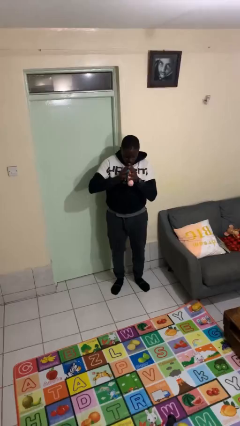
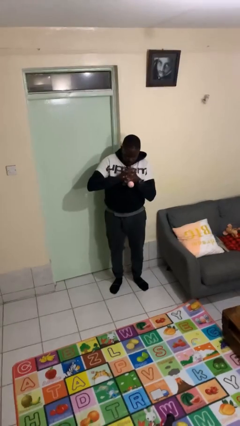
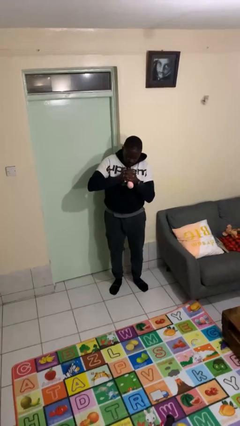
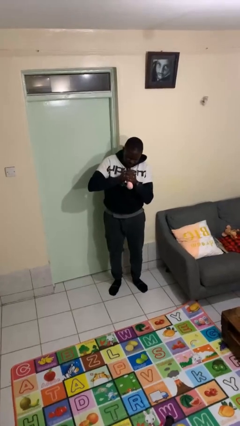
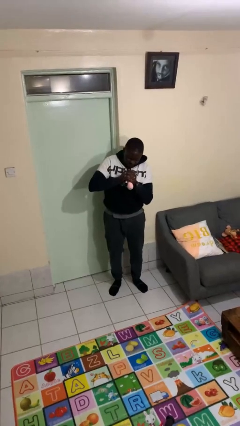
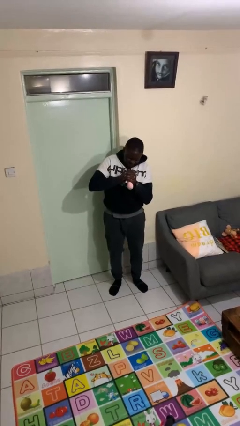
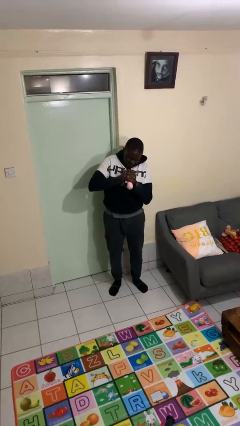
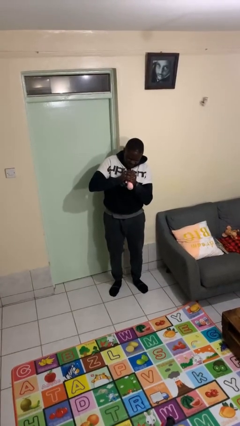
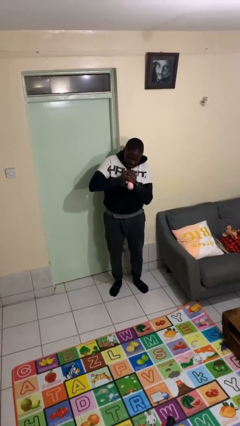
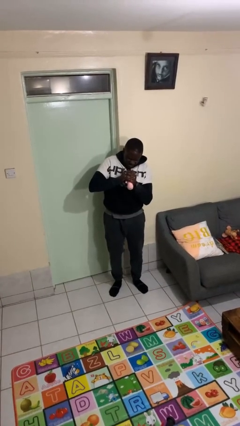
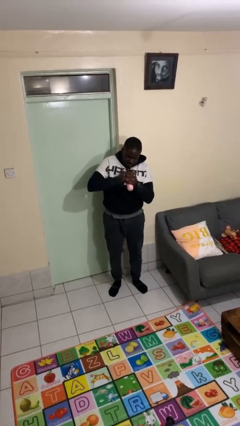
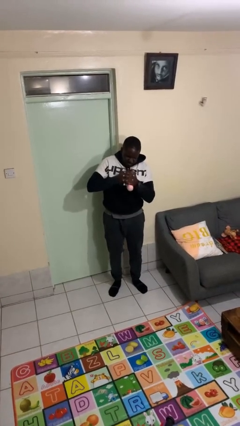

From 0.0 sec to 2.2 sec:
person squeezes object

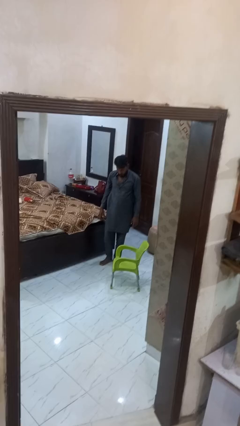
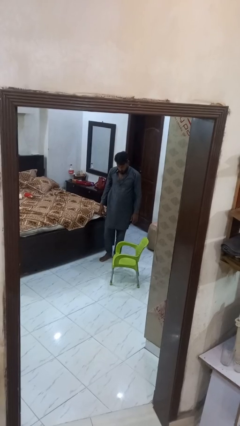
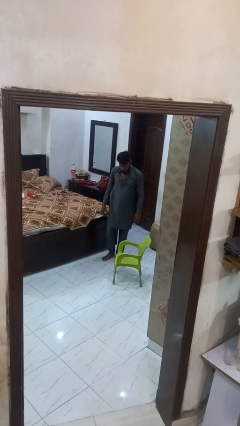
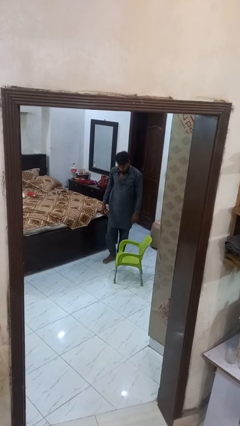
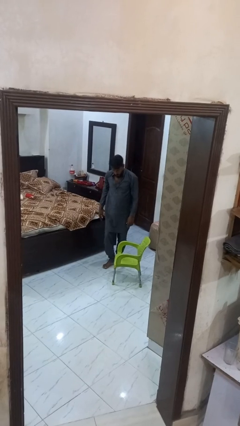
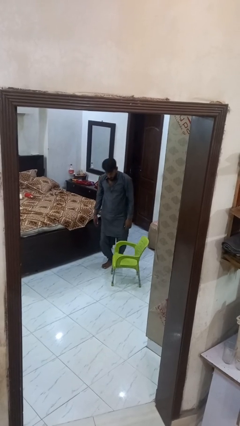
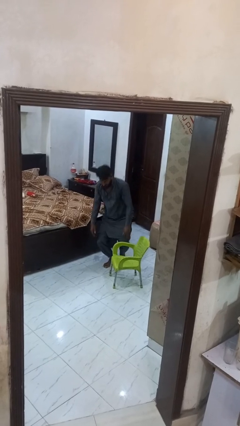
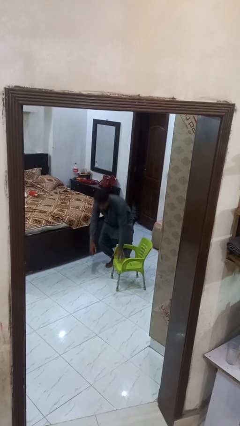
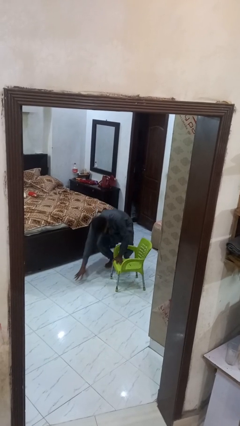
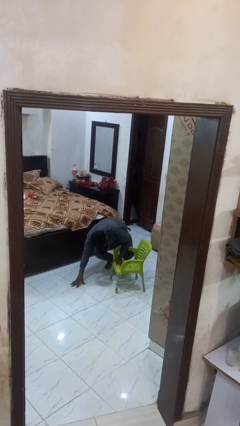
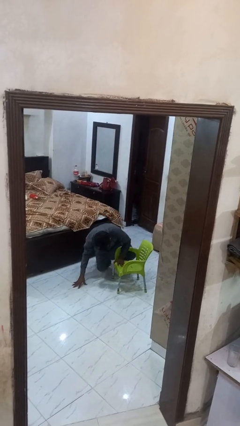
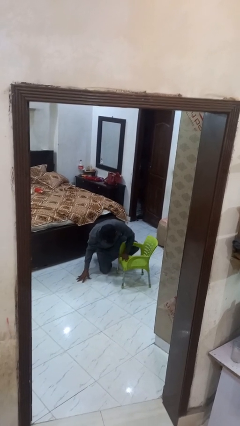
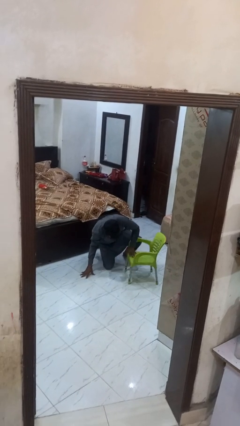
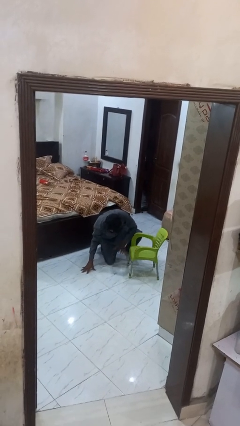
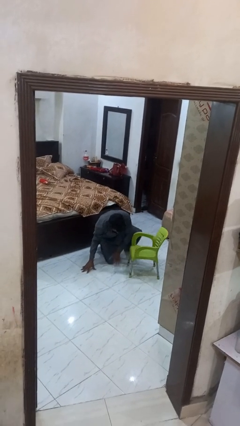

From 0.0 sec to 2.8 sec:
person trips on object on floor

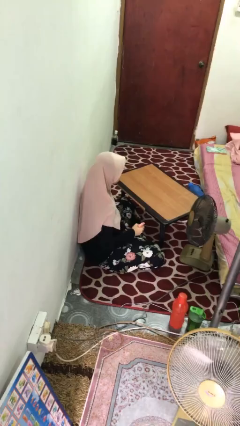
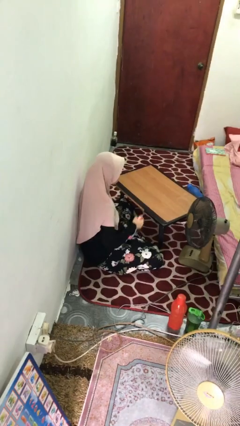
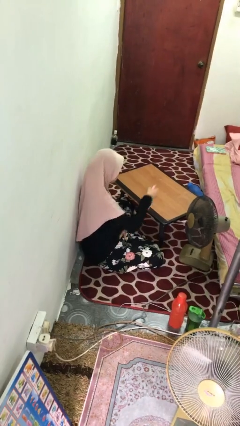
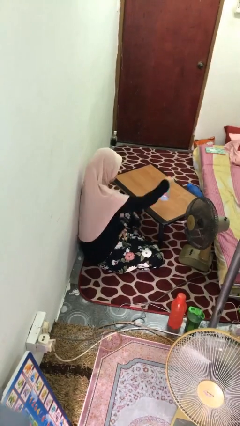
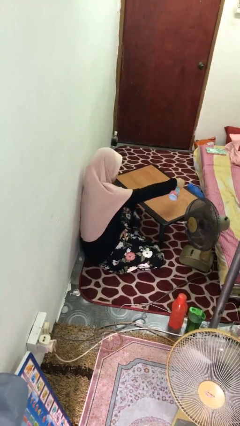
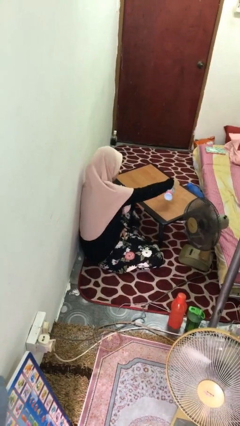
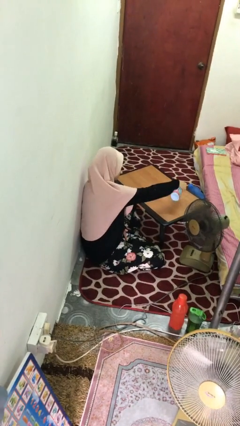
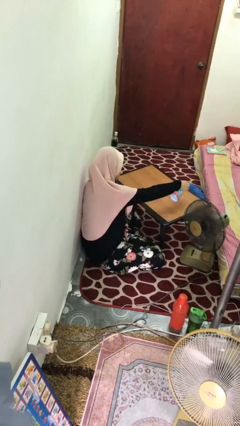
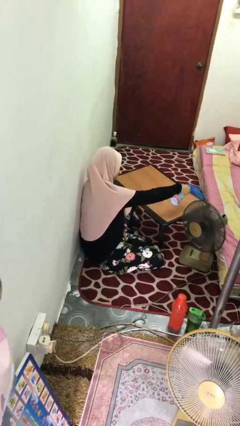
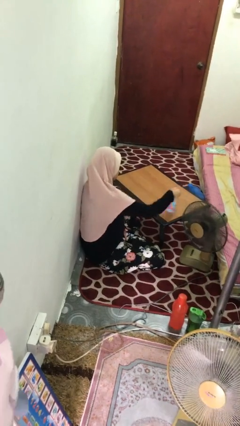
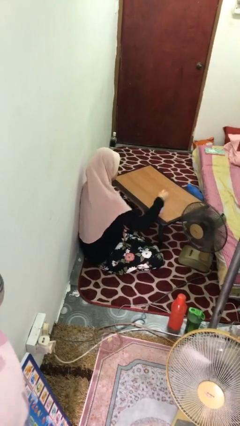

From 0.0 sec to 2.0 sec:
person sprays from bottle

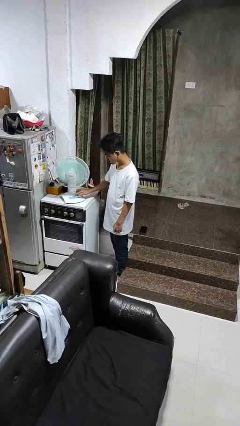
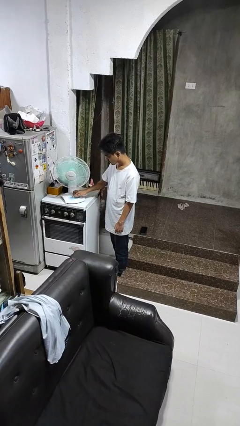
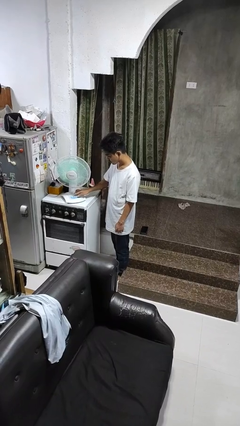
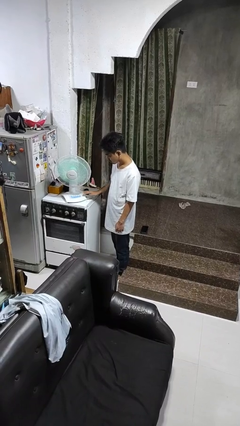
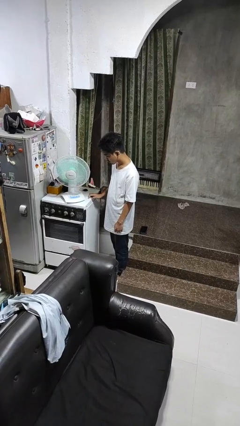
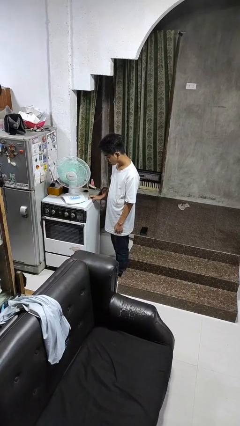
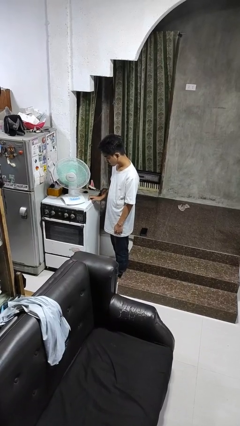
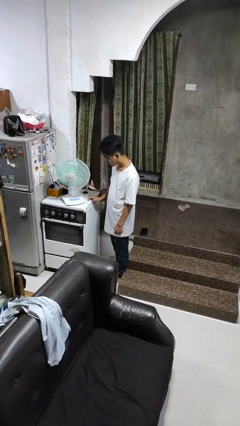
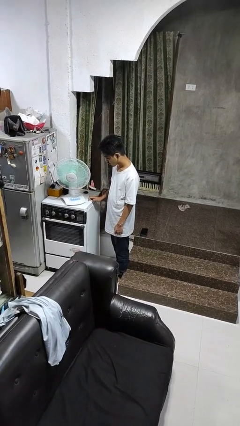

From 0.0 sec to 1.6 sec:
person turns off fan

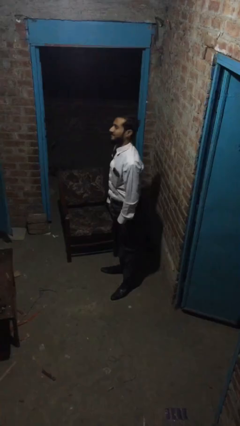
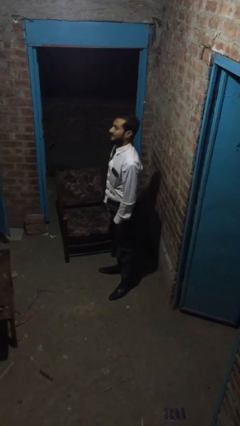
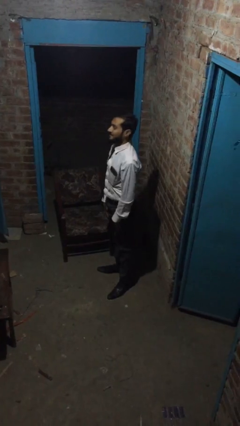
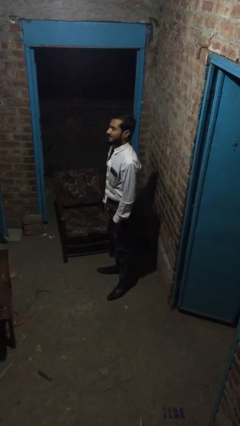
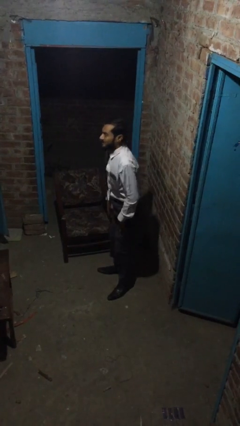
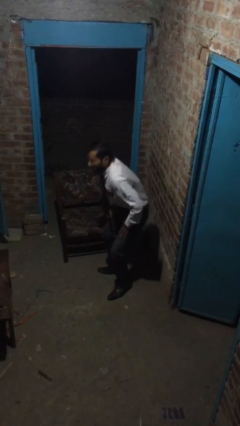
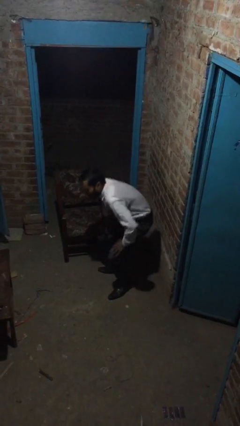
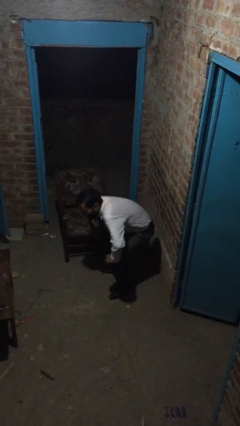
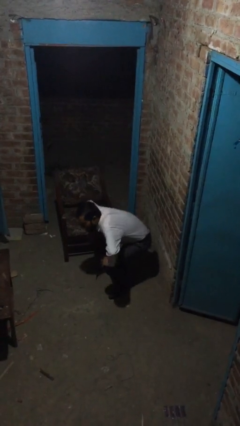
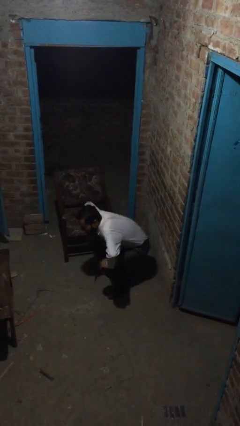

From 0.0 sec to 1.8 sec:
person sits down

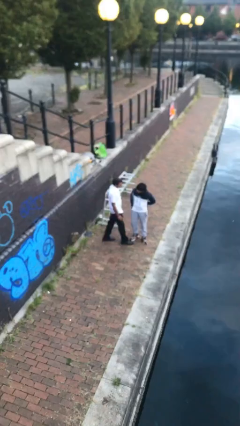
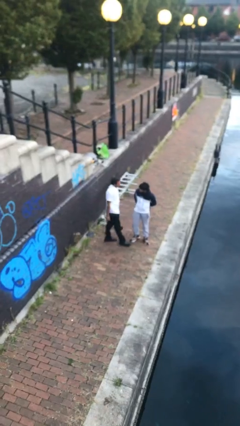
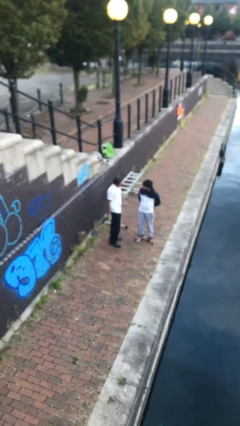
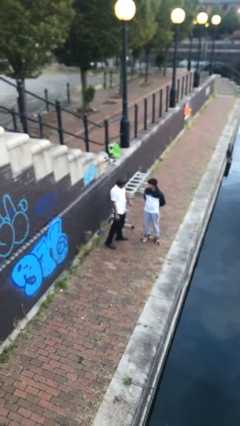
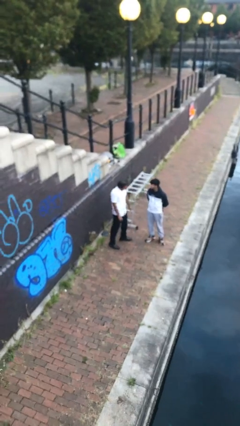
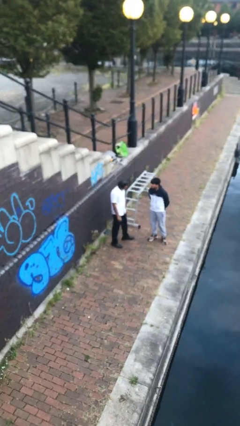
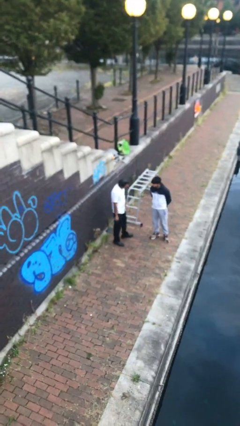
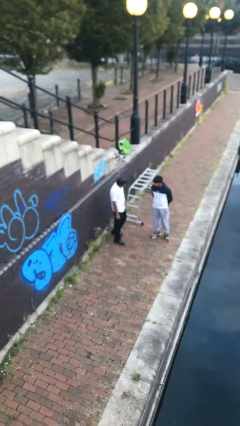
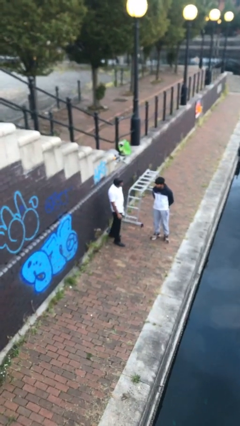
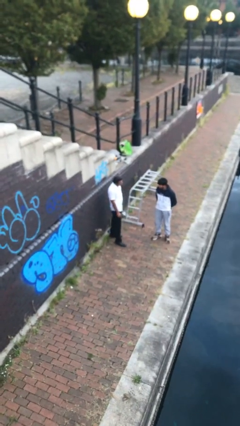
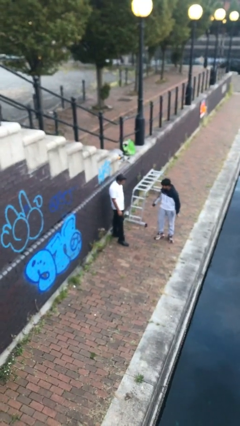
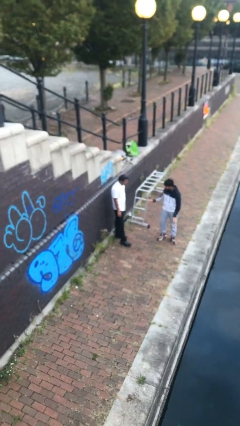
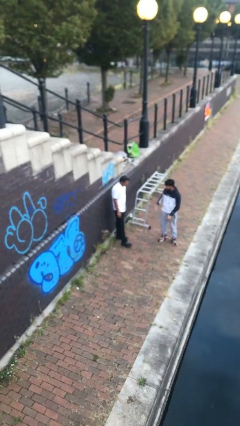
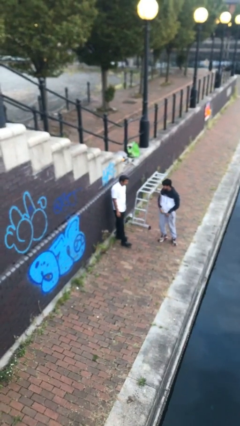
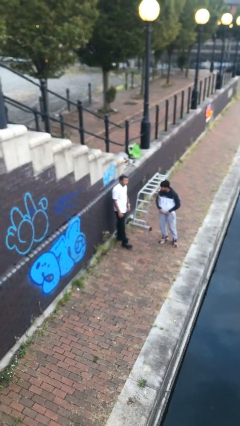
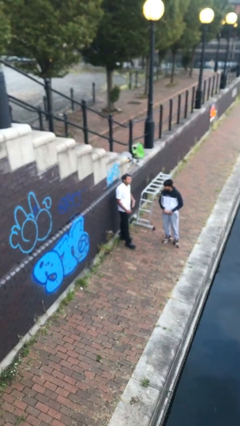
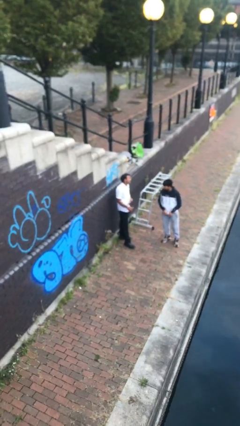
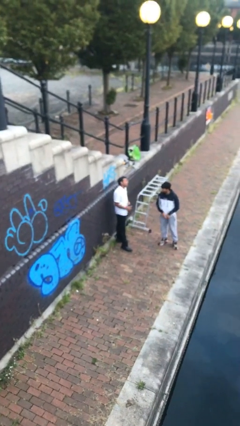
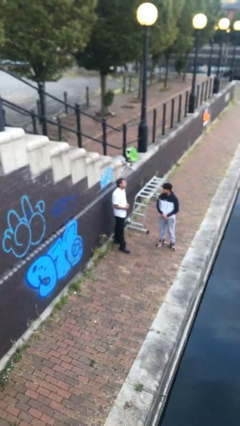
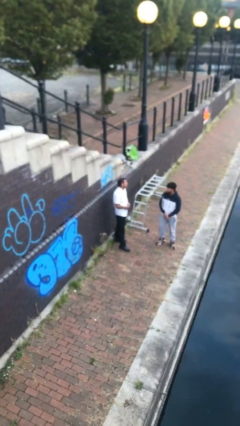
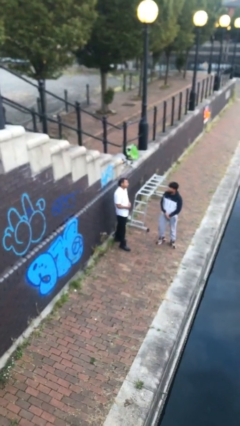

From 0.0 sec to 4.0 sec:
person talks to person

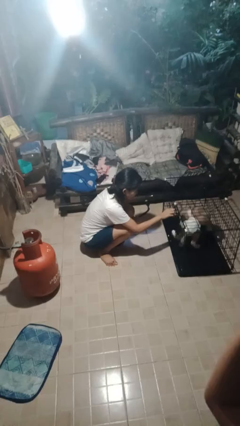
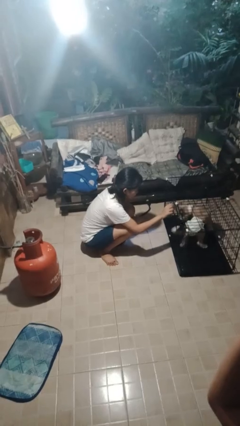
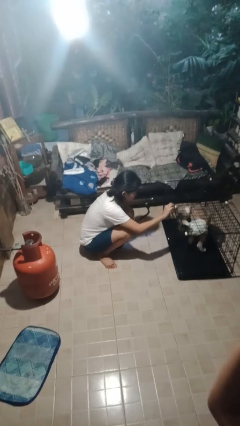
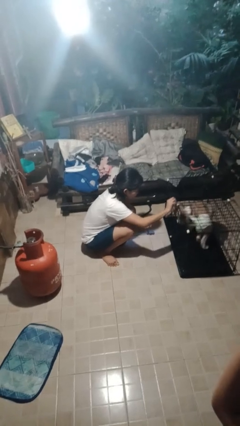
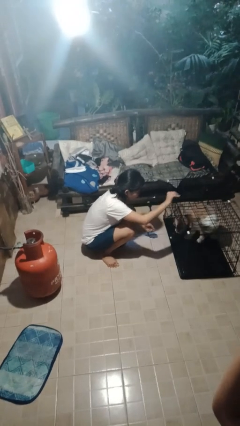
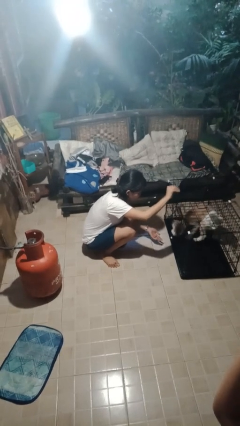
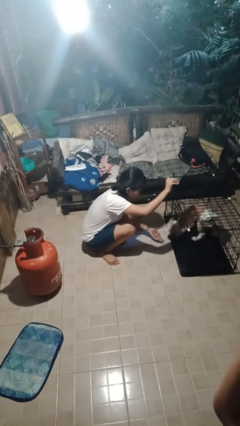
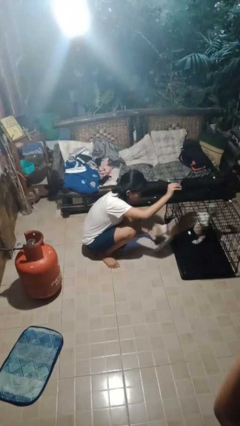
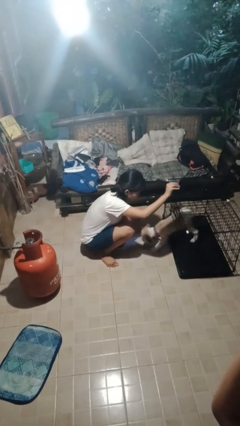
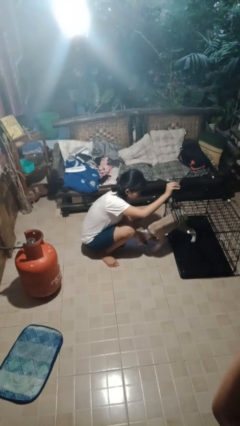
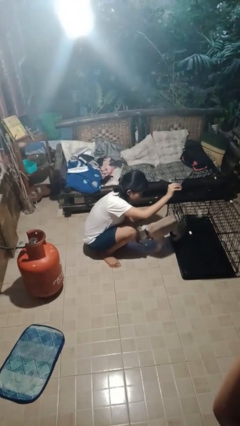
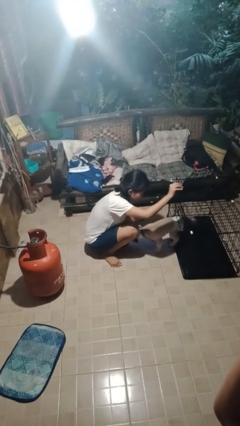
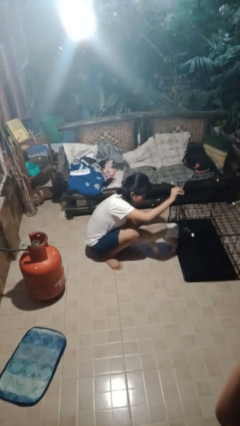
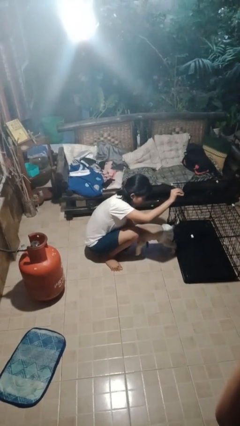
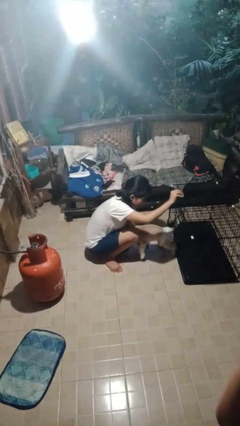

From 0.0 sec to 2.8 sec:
person uncrates dog

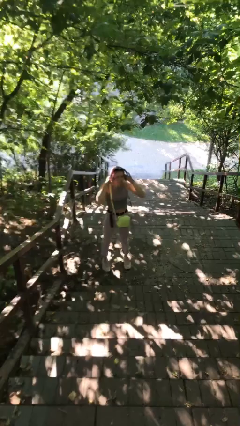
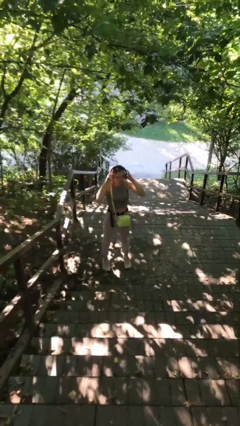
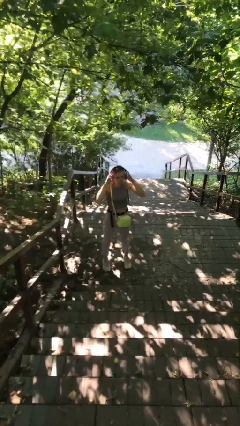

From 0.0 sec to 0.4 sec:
person puts on headphones
